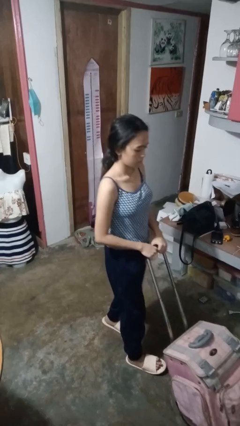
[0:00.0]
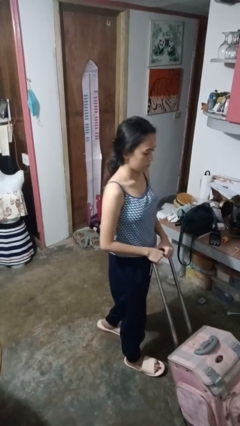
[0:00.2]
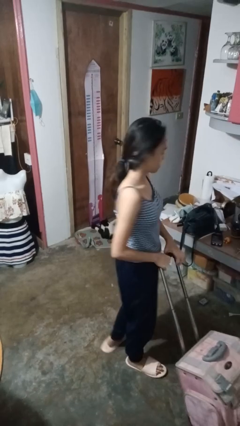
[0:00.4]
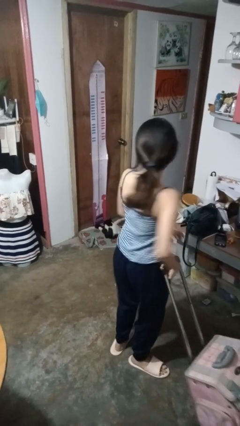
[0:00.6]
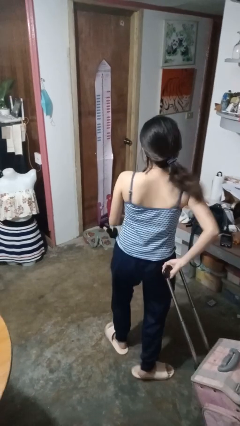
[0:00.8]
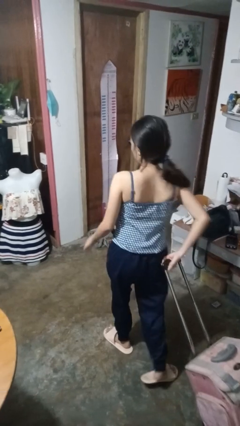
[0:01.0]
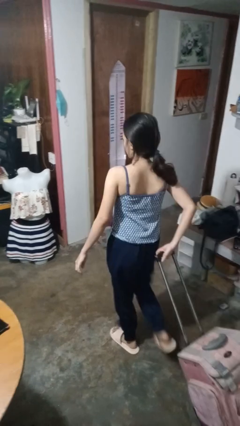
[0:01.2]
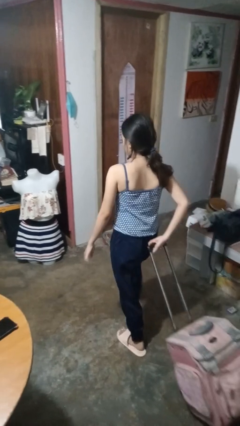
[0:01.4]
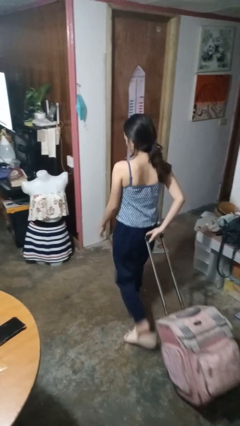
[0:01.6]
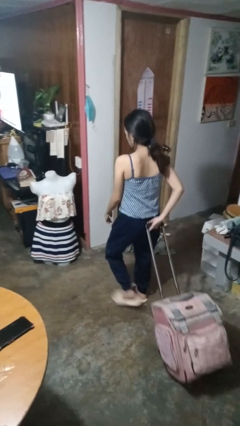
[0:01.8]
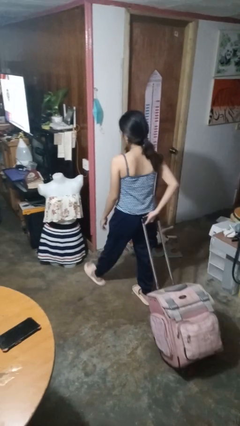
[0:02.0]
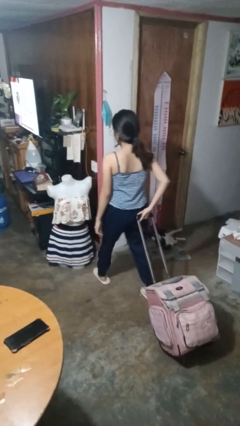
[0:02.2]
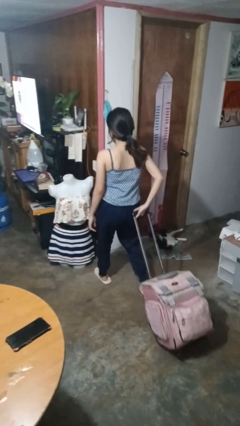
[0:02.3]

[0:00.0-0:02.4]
person pulls wheeled cart

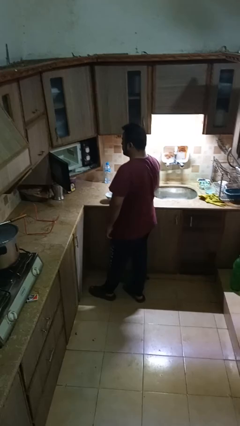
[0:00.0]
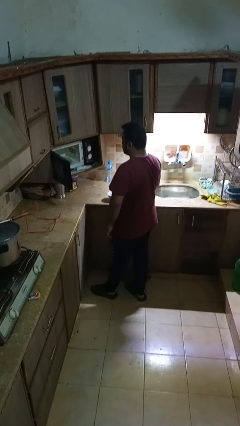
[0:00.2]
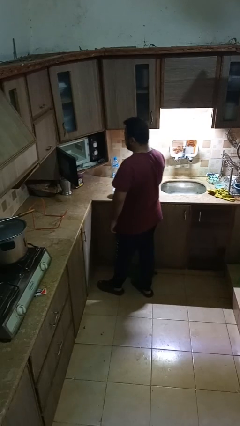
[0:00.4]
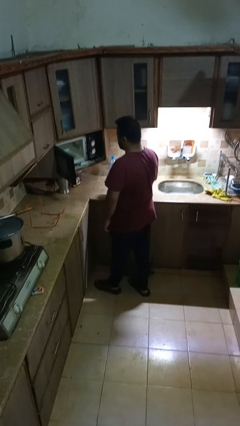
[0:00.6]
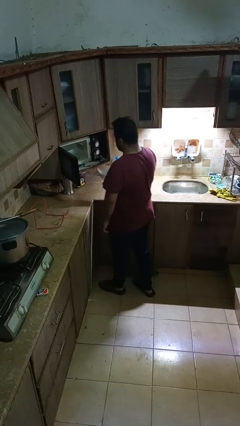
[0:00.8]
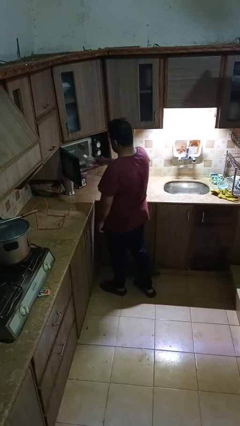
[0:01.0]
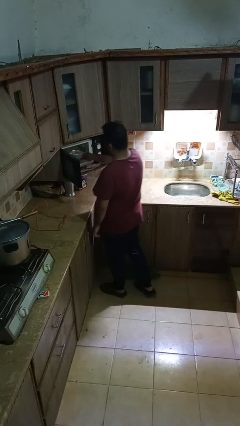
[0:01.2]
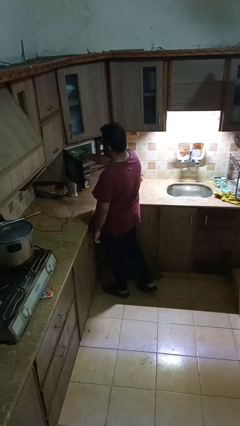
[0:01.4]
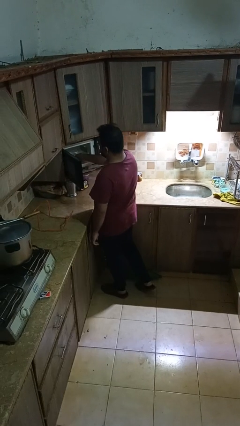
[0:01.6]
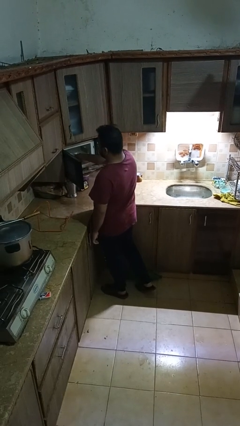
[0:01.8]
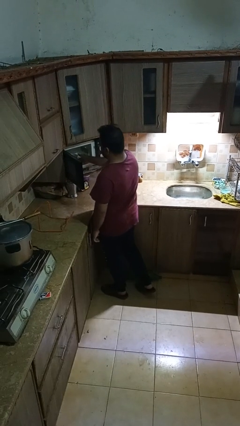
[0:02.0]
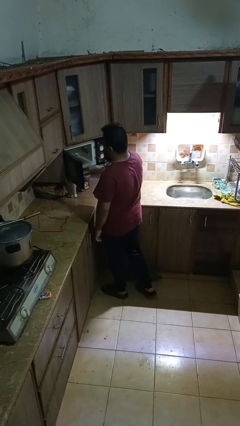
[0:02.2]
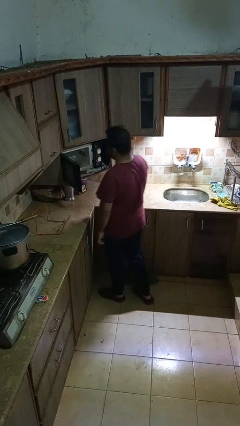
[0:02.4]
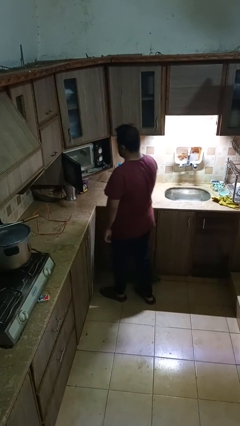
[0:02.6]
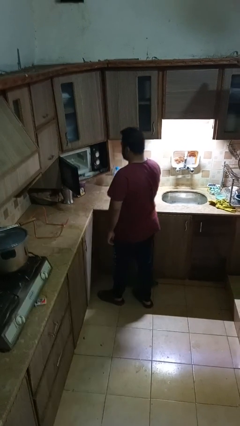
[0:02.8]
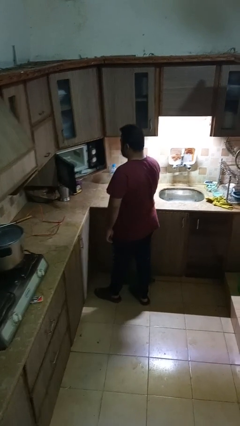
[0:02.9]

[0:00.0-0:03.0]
person puts object into microwave

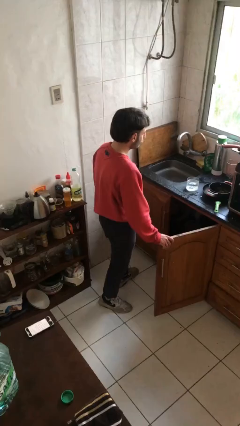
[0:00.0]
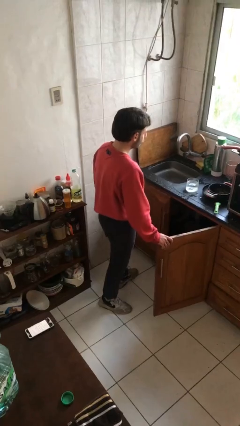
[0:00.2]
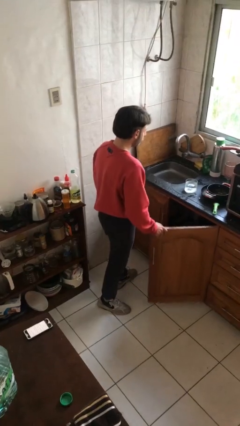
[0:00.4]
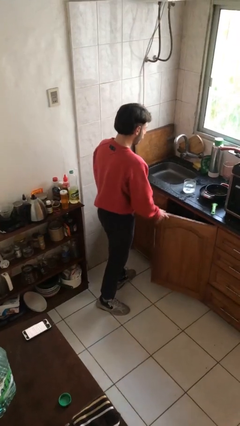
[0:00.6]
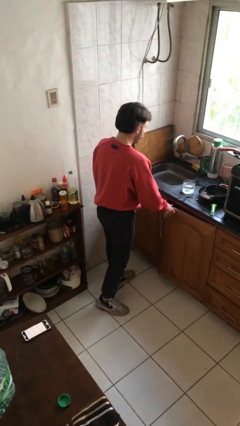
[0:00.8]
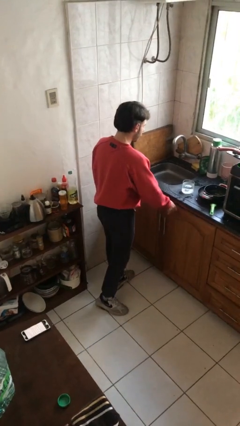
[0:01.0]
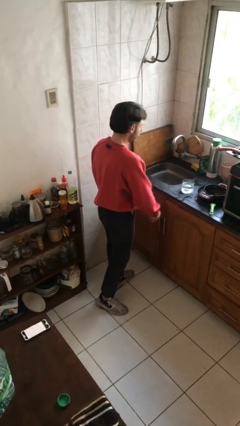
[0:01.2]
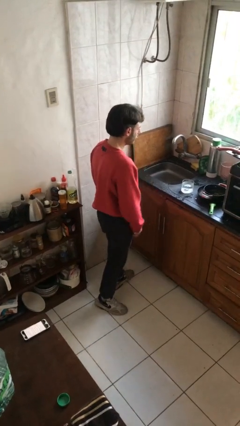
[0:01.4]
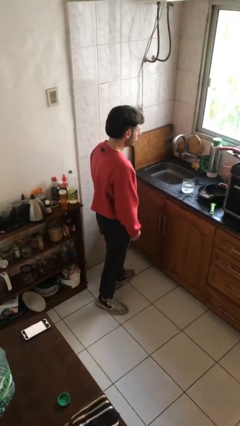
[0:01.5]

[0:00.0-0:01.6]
person closes cabinet

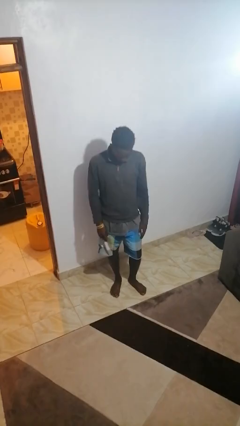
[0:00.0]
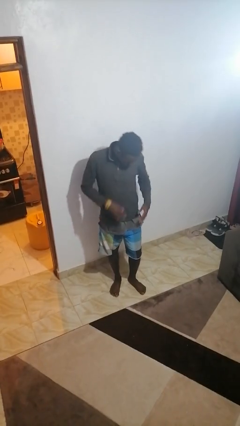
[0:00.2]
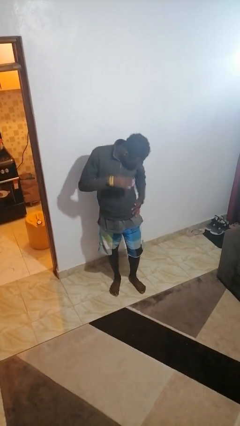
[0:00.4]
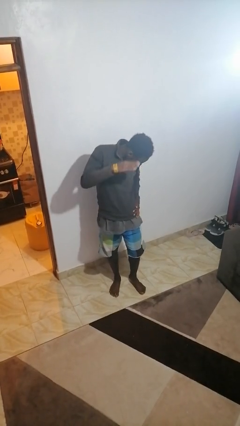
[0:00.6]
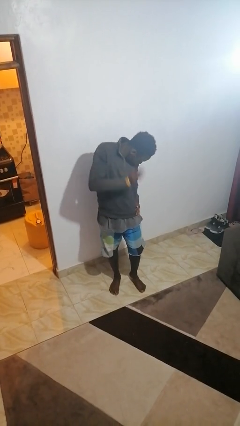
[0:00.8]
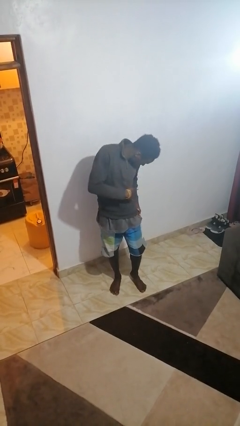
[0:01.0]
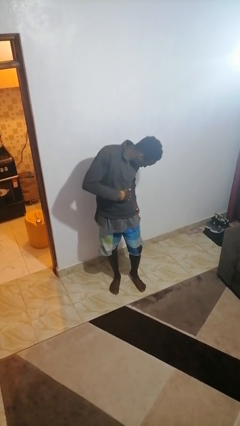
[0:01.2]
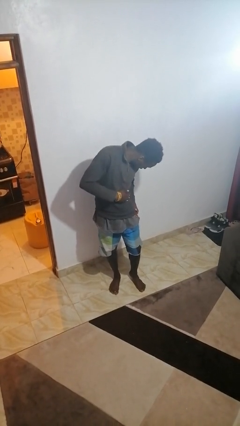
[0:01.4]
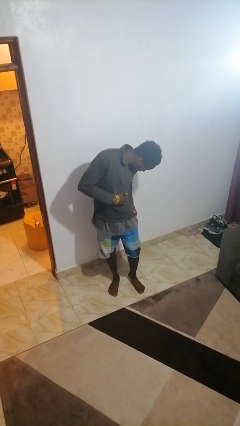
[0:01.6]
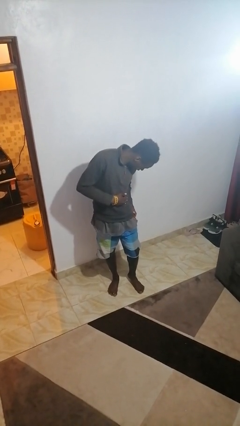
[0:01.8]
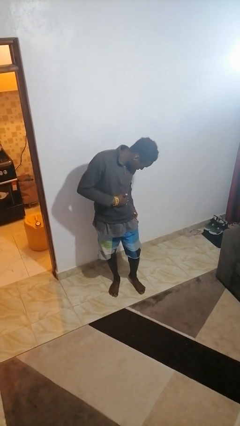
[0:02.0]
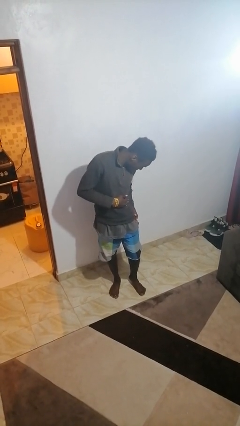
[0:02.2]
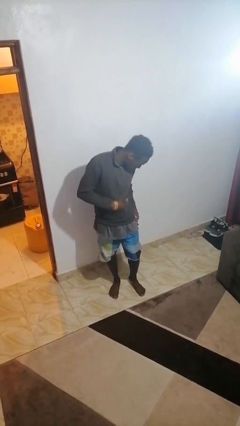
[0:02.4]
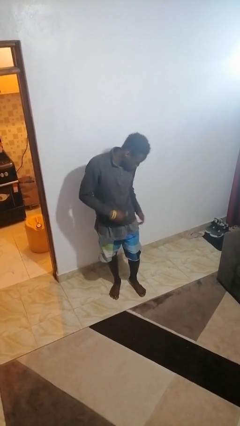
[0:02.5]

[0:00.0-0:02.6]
person swats bug

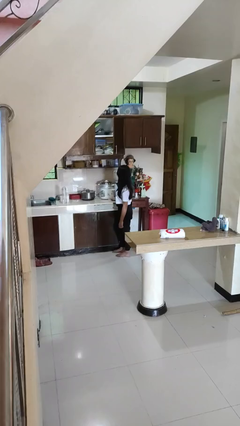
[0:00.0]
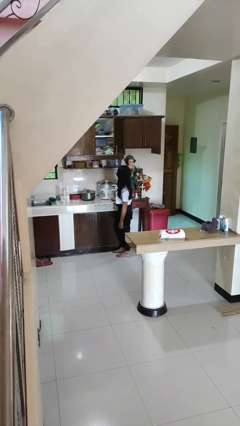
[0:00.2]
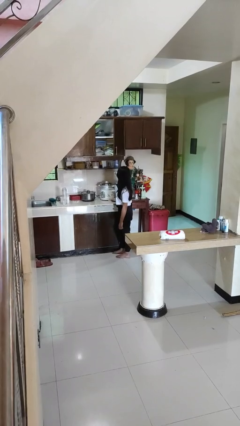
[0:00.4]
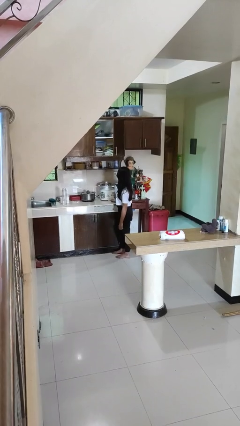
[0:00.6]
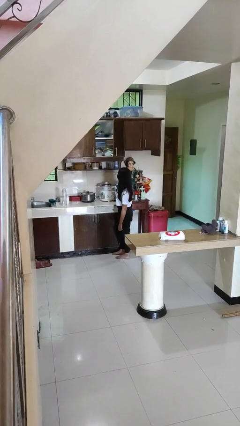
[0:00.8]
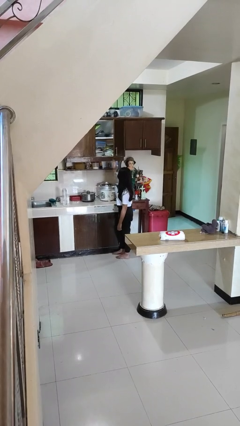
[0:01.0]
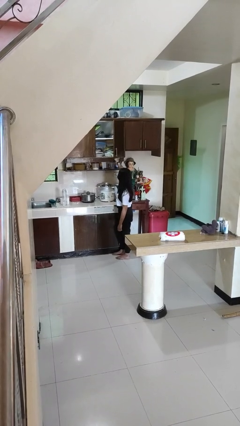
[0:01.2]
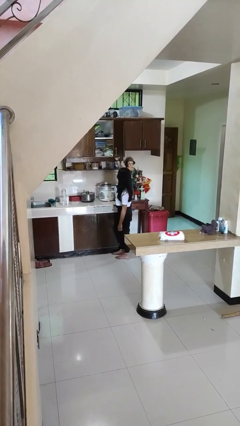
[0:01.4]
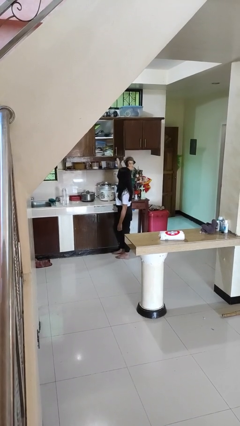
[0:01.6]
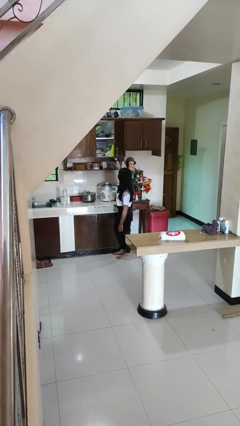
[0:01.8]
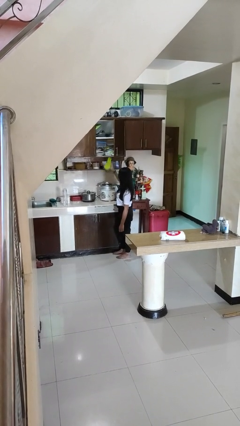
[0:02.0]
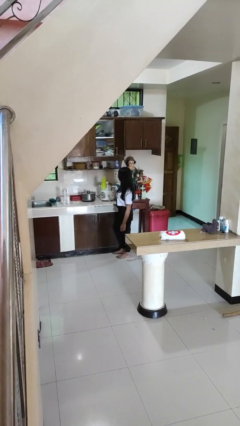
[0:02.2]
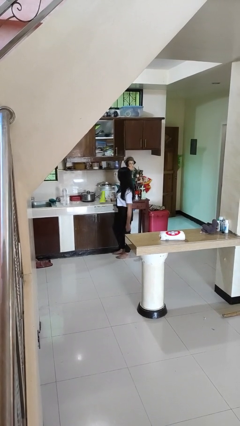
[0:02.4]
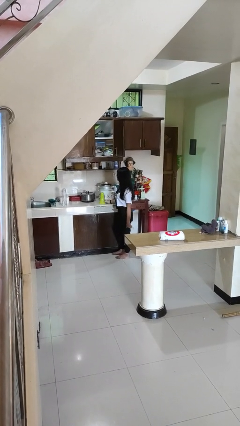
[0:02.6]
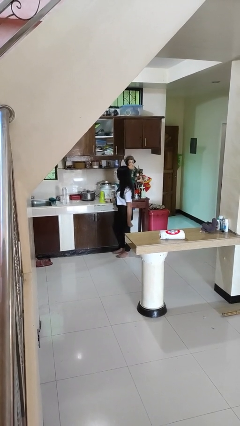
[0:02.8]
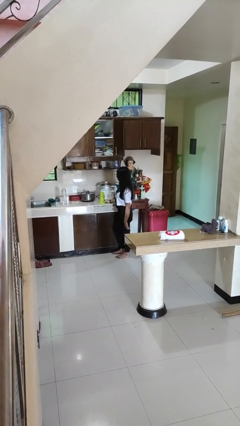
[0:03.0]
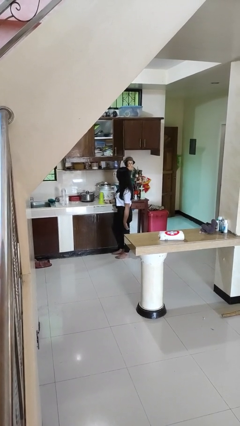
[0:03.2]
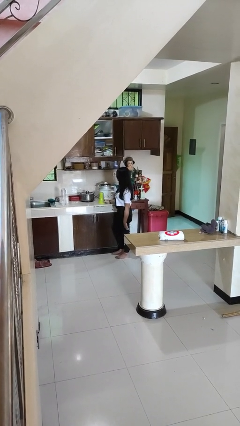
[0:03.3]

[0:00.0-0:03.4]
person picks up object from cabinet

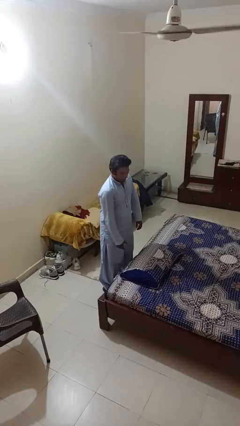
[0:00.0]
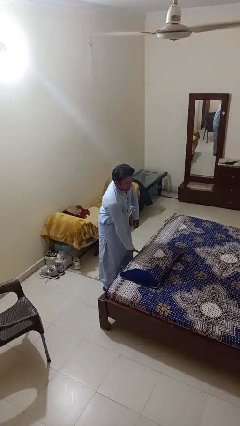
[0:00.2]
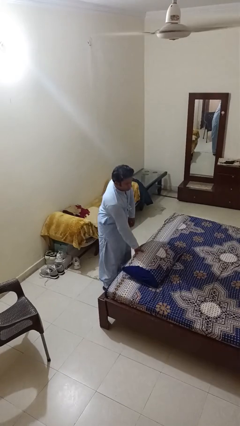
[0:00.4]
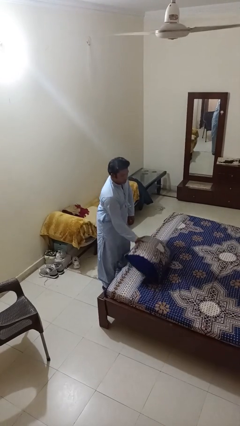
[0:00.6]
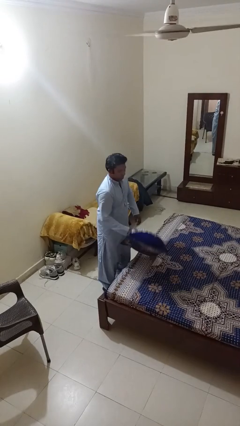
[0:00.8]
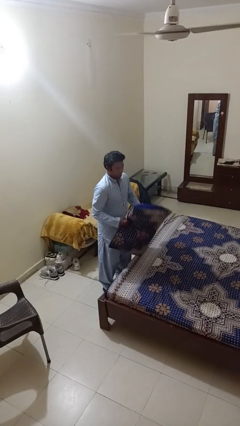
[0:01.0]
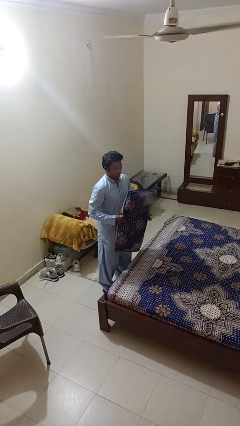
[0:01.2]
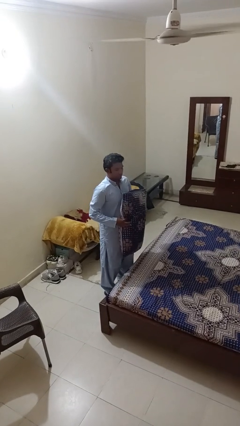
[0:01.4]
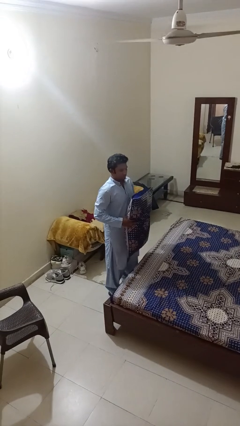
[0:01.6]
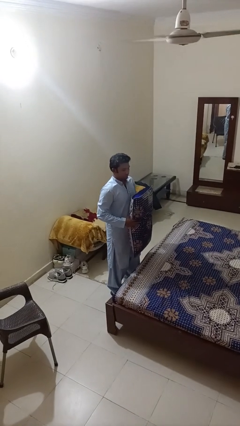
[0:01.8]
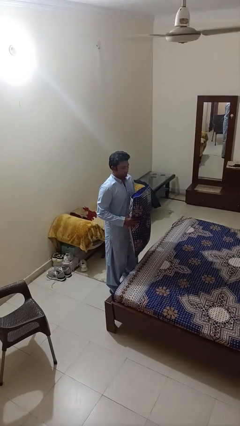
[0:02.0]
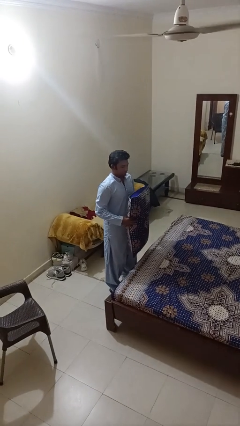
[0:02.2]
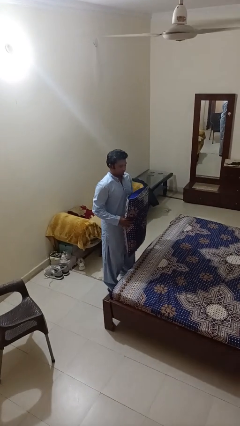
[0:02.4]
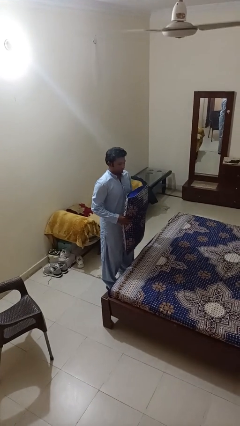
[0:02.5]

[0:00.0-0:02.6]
person picks up object from bed

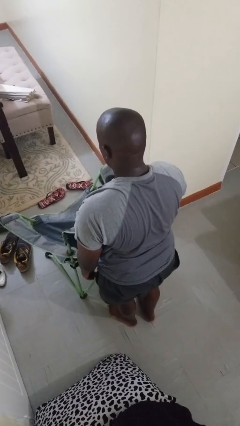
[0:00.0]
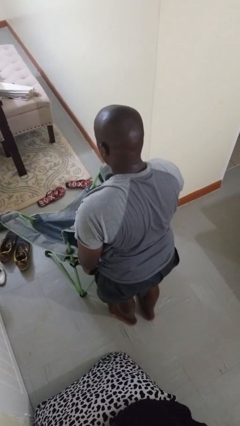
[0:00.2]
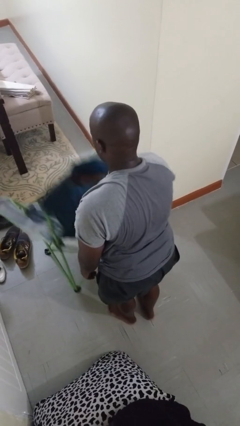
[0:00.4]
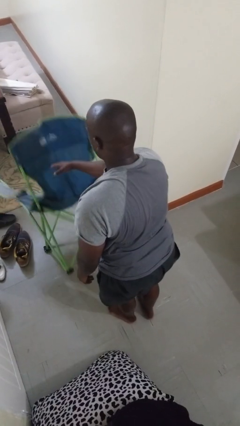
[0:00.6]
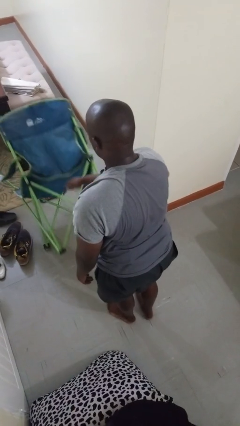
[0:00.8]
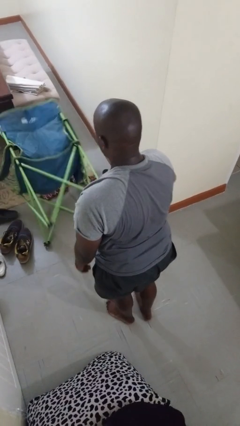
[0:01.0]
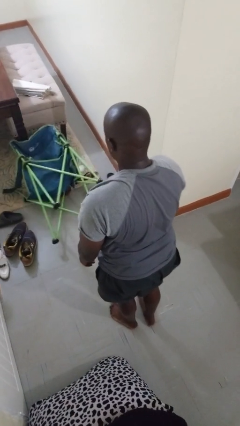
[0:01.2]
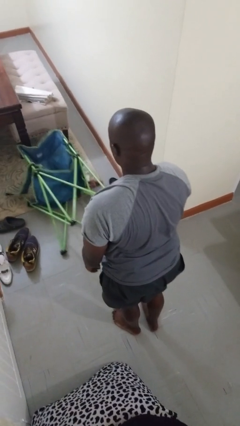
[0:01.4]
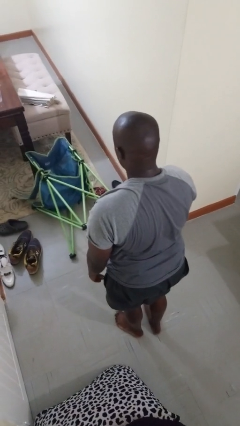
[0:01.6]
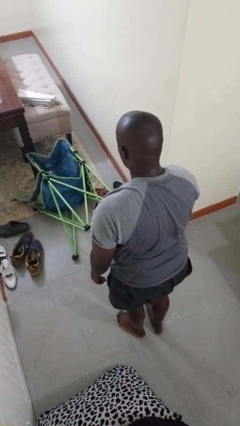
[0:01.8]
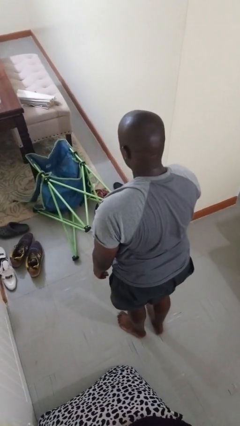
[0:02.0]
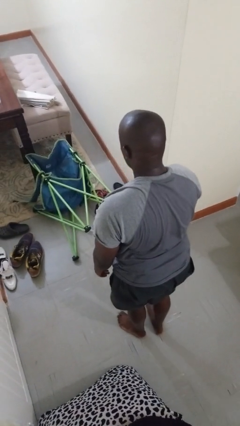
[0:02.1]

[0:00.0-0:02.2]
person knocks over furniture
